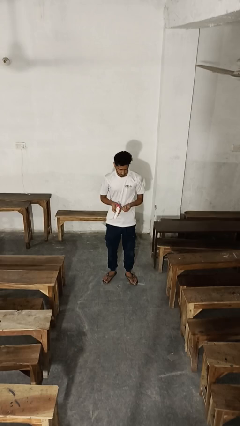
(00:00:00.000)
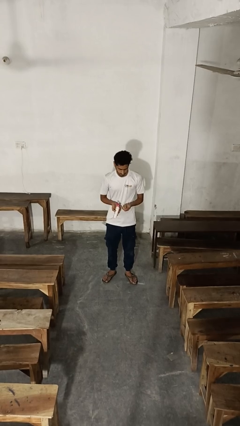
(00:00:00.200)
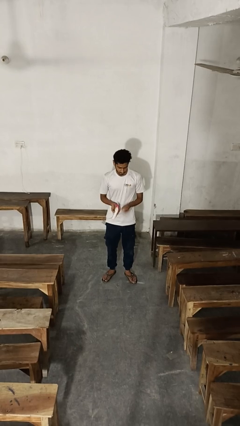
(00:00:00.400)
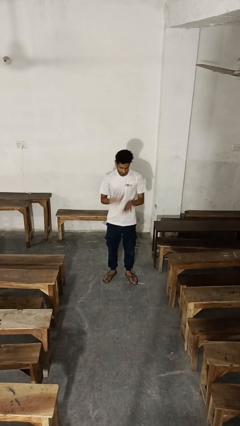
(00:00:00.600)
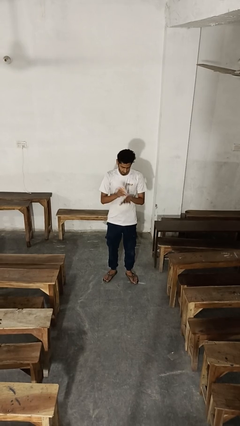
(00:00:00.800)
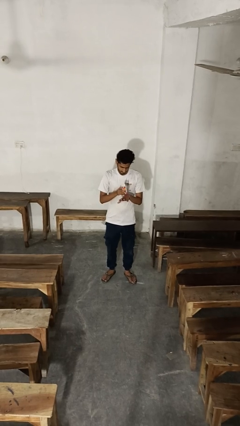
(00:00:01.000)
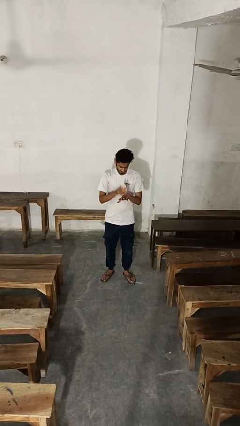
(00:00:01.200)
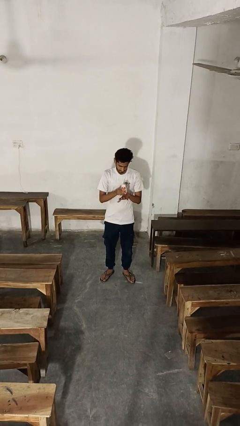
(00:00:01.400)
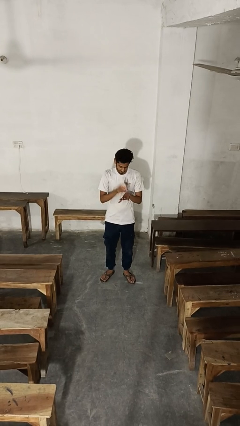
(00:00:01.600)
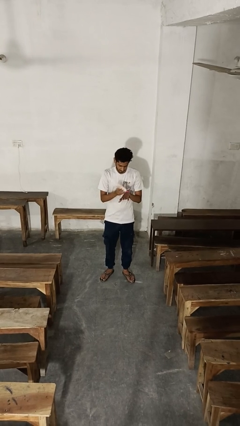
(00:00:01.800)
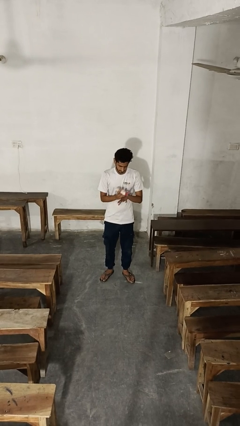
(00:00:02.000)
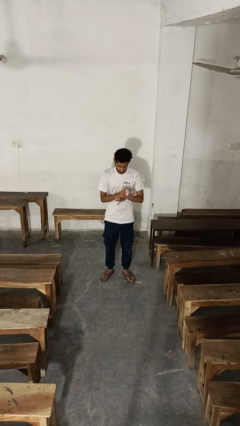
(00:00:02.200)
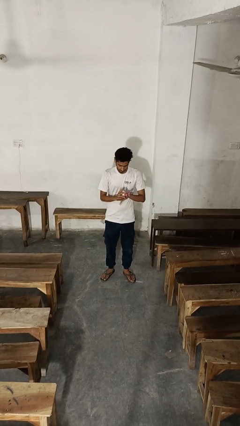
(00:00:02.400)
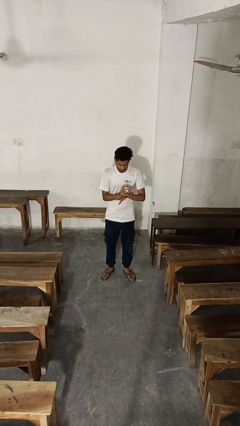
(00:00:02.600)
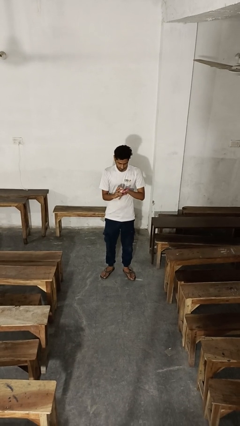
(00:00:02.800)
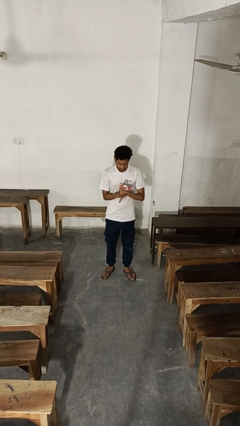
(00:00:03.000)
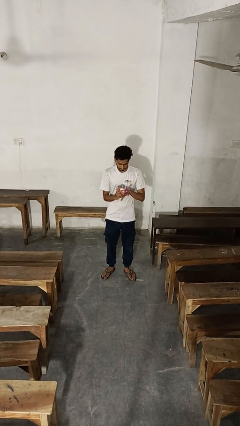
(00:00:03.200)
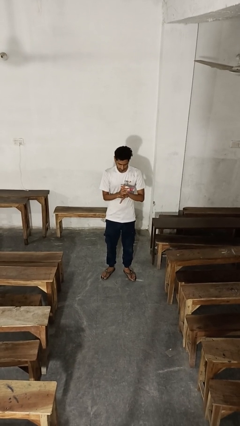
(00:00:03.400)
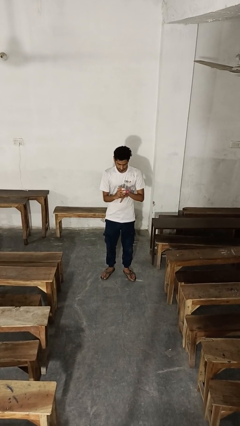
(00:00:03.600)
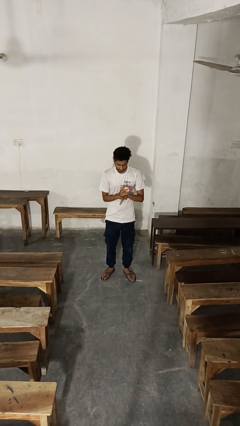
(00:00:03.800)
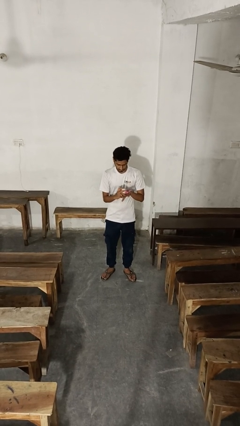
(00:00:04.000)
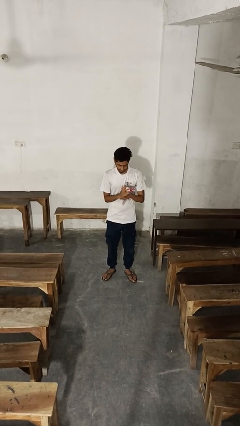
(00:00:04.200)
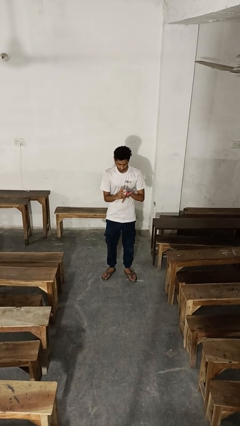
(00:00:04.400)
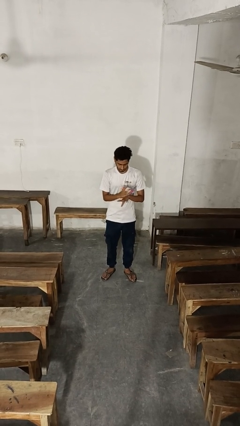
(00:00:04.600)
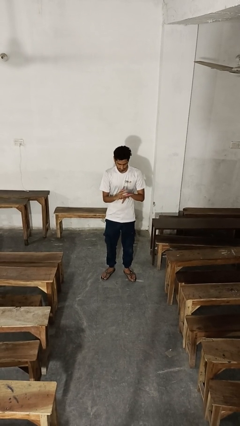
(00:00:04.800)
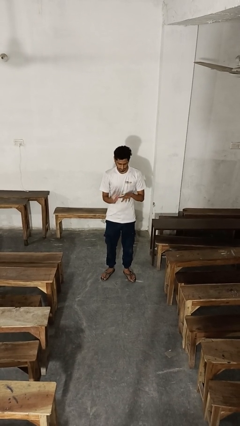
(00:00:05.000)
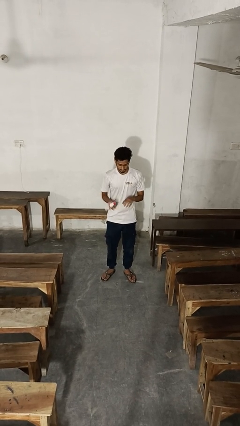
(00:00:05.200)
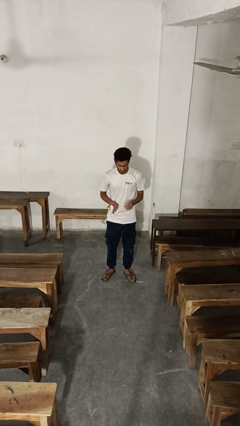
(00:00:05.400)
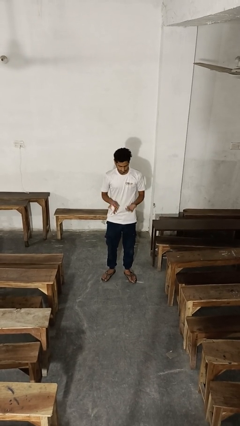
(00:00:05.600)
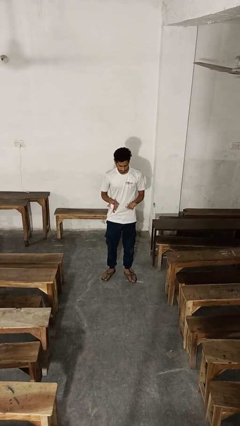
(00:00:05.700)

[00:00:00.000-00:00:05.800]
person applies sunscreen

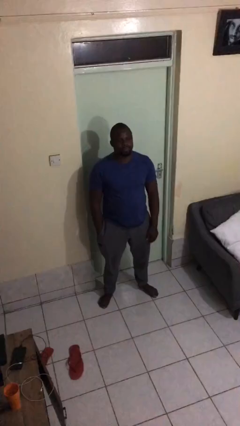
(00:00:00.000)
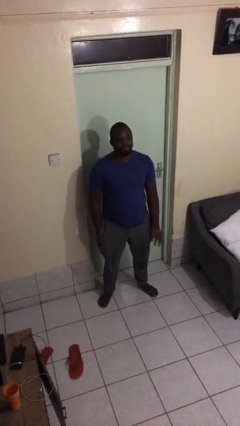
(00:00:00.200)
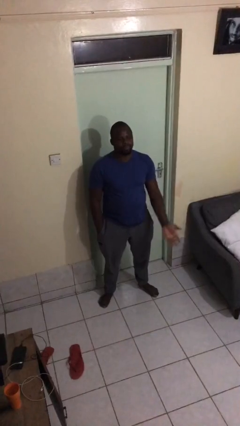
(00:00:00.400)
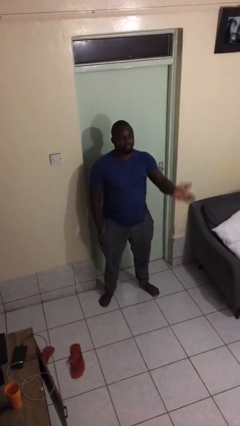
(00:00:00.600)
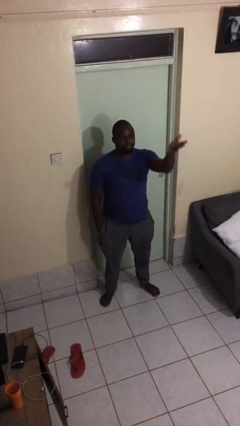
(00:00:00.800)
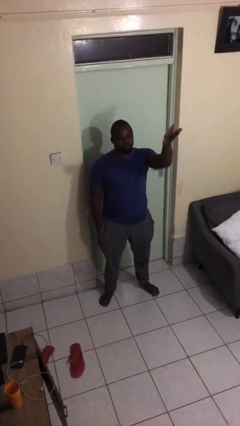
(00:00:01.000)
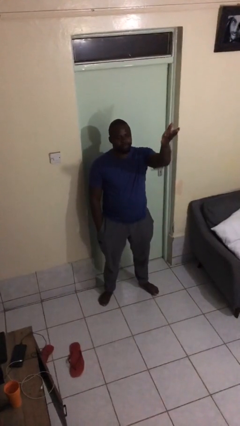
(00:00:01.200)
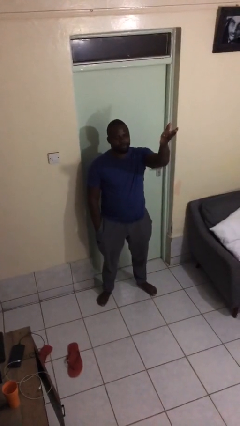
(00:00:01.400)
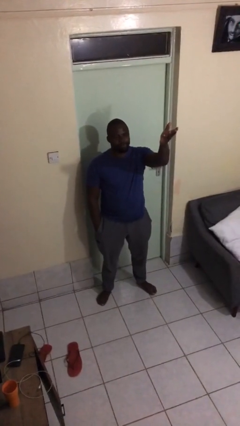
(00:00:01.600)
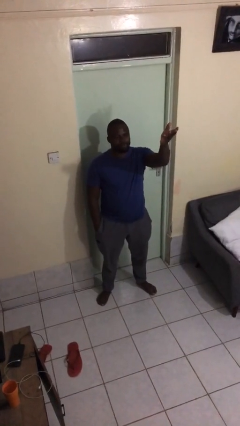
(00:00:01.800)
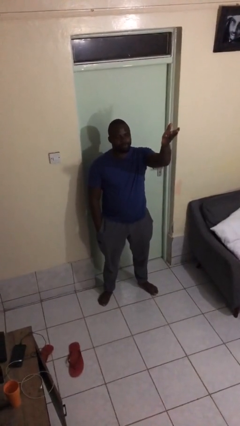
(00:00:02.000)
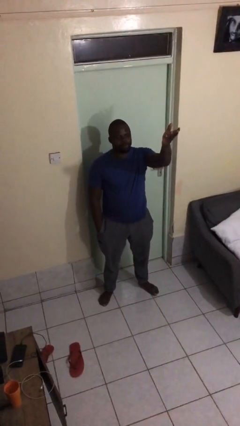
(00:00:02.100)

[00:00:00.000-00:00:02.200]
person gestures swipe up

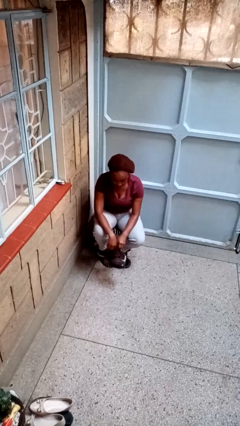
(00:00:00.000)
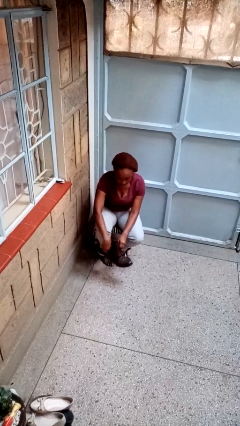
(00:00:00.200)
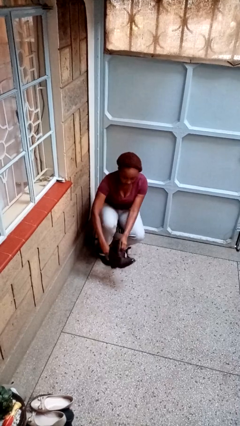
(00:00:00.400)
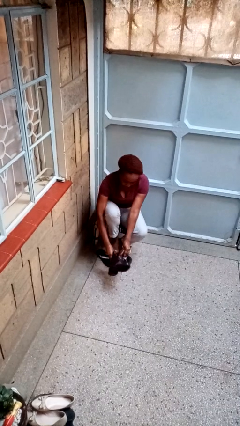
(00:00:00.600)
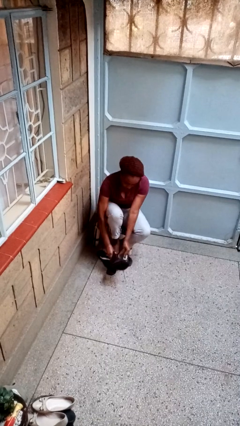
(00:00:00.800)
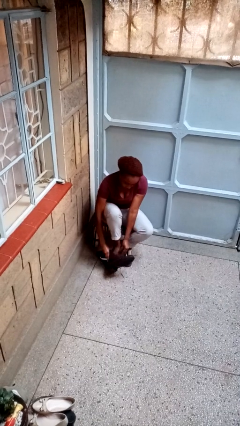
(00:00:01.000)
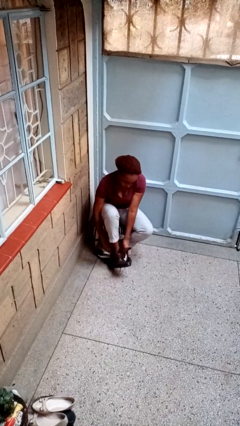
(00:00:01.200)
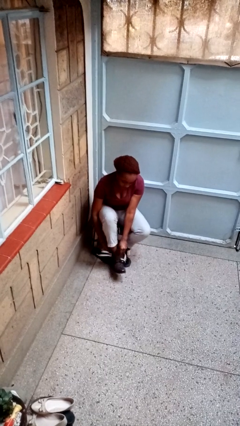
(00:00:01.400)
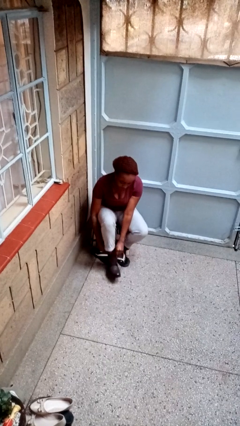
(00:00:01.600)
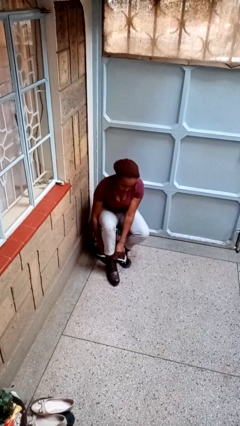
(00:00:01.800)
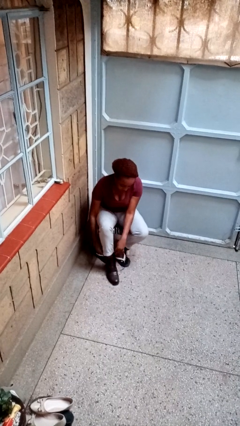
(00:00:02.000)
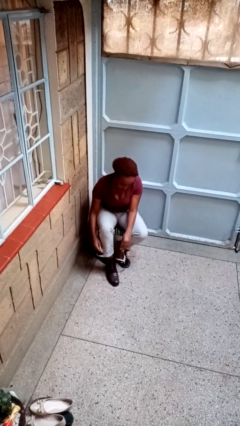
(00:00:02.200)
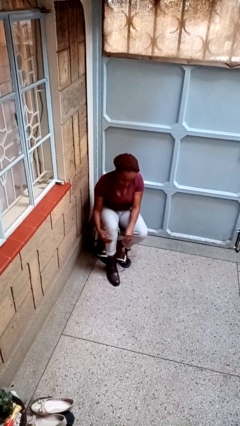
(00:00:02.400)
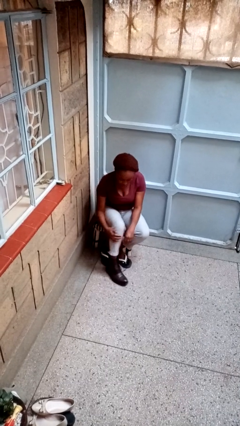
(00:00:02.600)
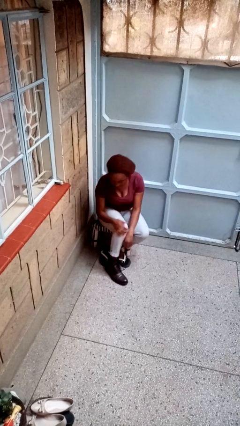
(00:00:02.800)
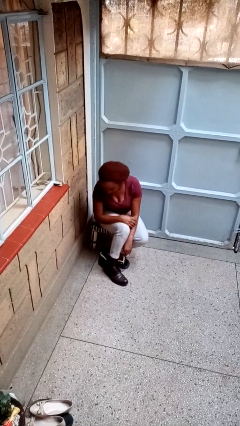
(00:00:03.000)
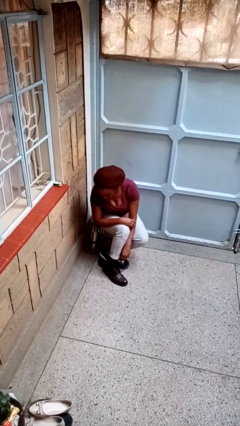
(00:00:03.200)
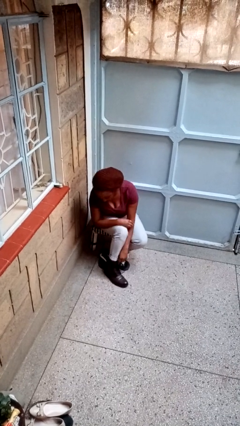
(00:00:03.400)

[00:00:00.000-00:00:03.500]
person puts on boots

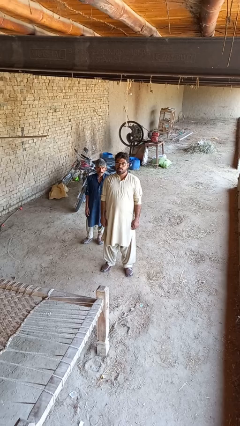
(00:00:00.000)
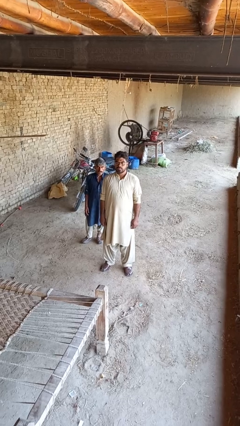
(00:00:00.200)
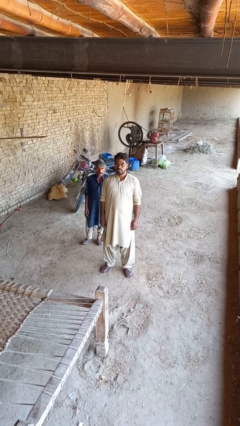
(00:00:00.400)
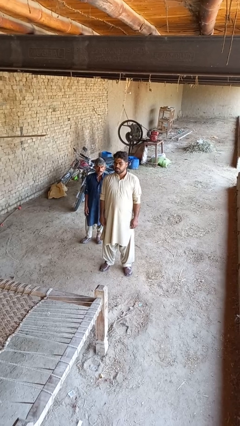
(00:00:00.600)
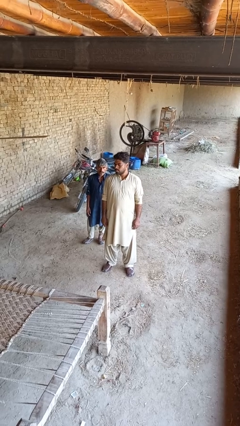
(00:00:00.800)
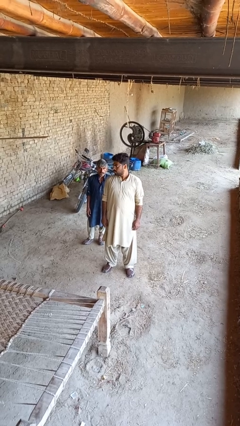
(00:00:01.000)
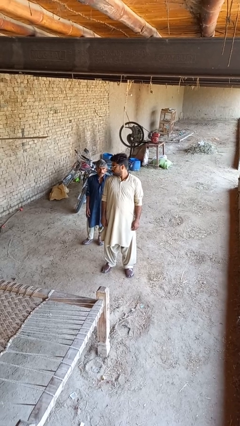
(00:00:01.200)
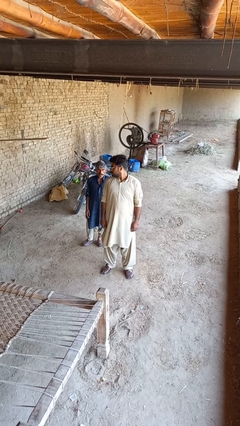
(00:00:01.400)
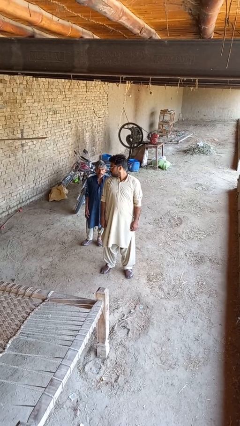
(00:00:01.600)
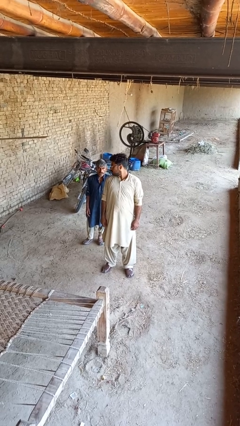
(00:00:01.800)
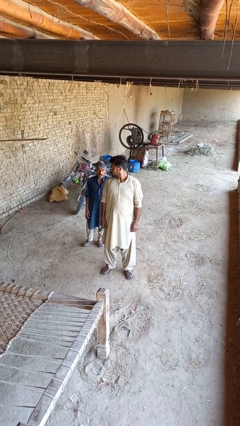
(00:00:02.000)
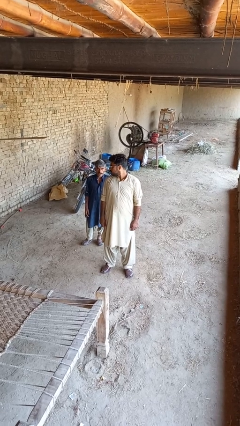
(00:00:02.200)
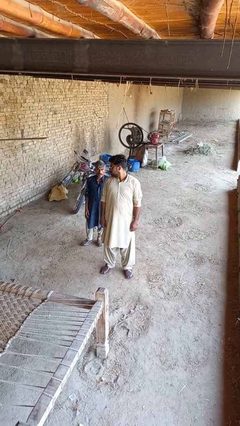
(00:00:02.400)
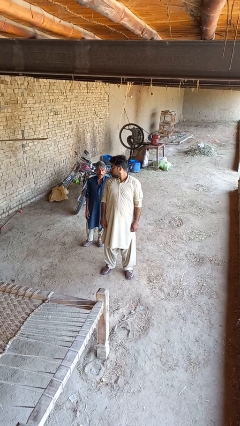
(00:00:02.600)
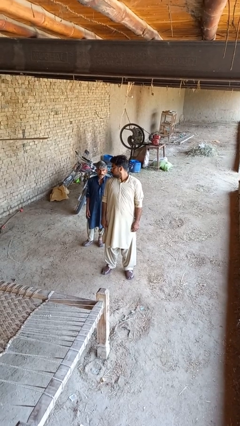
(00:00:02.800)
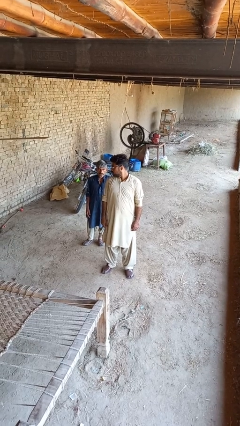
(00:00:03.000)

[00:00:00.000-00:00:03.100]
person looks over shoulder

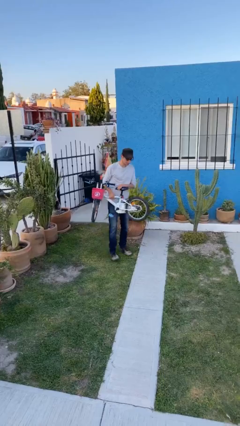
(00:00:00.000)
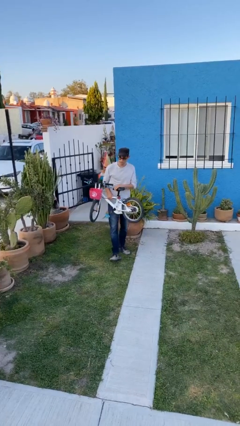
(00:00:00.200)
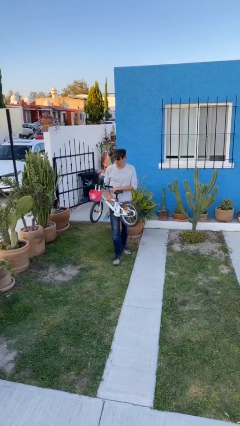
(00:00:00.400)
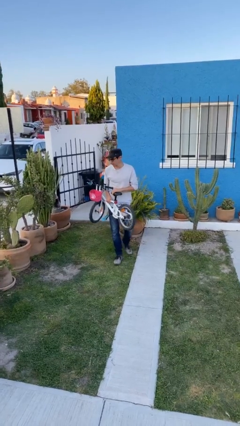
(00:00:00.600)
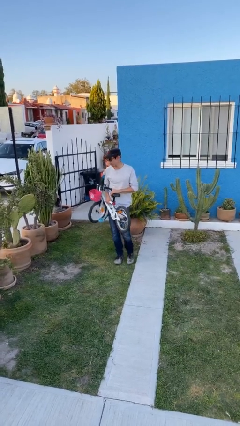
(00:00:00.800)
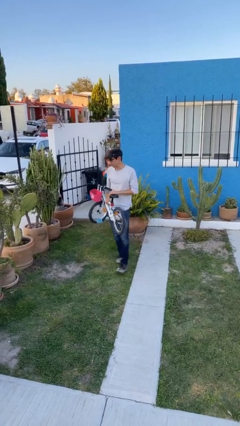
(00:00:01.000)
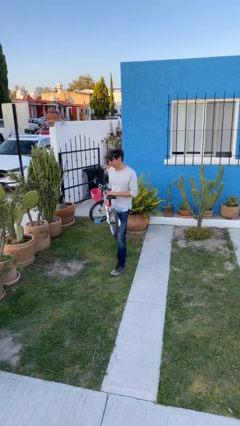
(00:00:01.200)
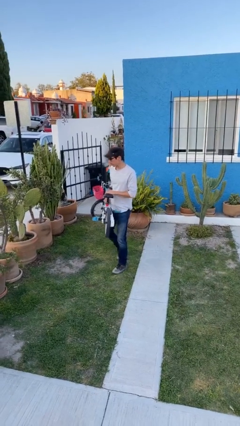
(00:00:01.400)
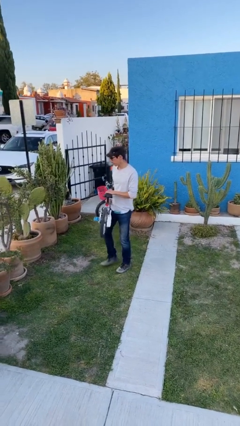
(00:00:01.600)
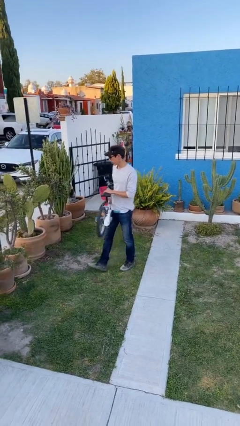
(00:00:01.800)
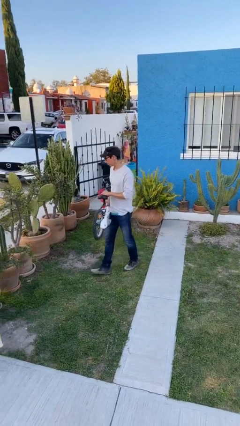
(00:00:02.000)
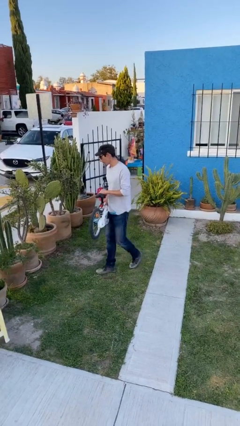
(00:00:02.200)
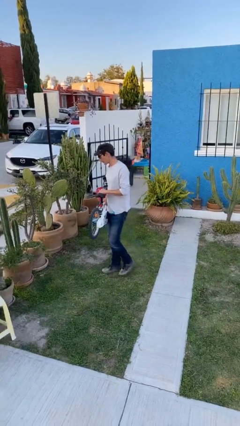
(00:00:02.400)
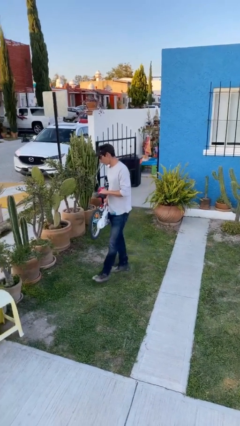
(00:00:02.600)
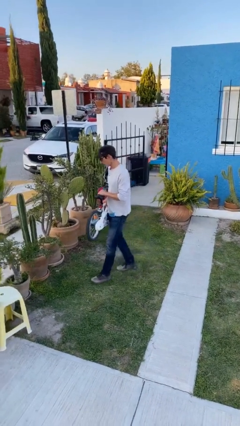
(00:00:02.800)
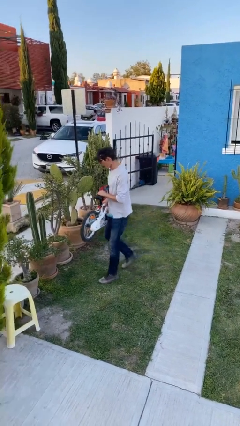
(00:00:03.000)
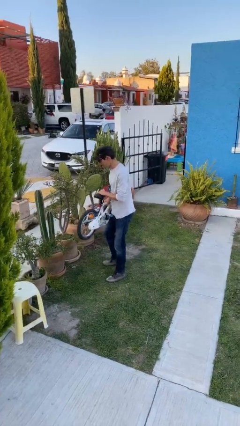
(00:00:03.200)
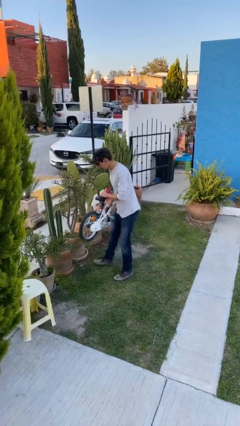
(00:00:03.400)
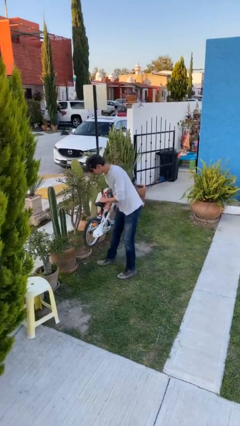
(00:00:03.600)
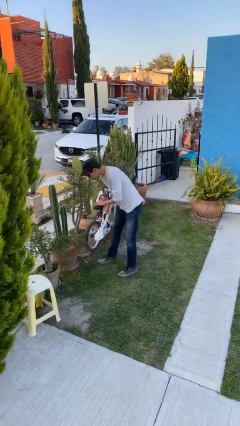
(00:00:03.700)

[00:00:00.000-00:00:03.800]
person carries heavy object
